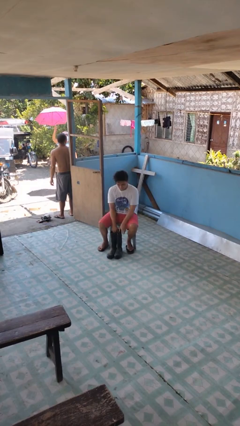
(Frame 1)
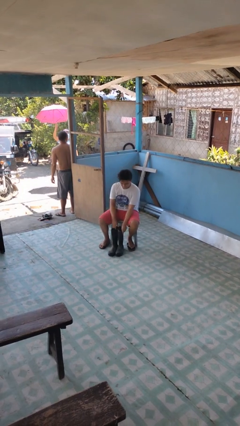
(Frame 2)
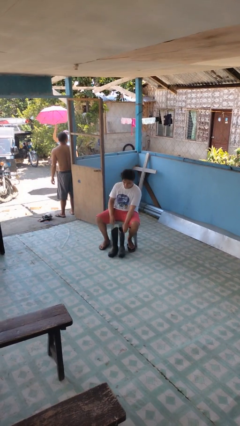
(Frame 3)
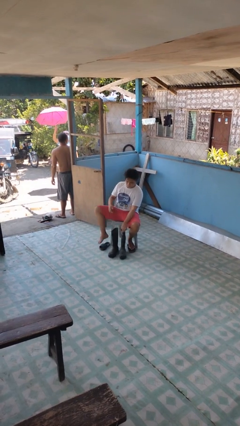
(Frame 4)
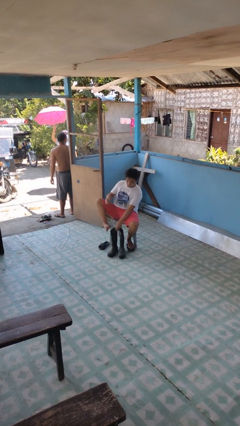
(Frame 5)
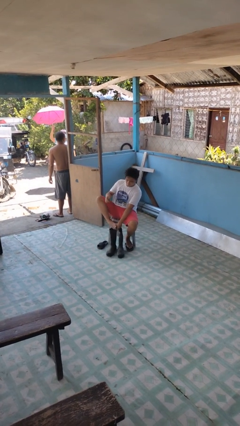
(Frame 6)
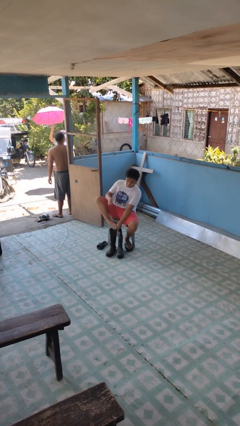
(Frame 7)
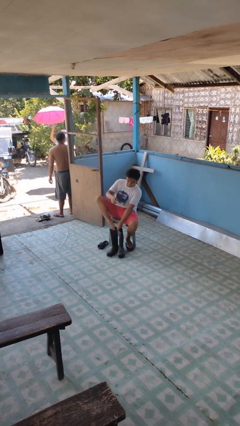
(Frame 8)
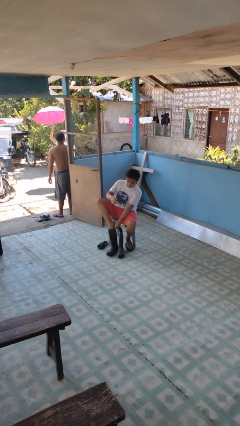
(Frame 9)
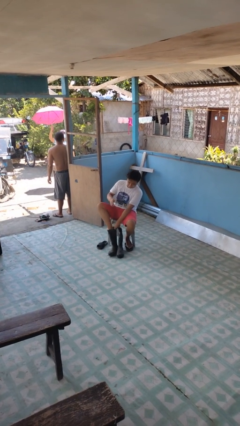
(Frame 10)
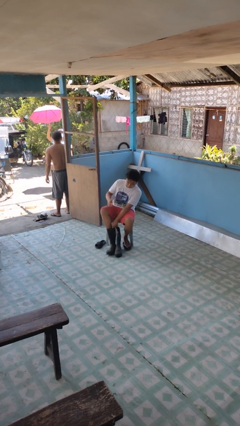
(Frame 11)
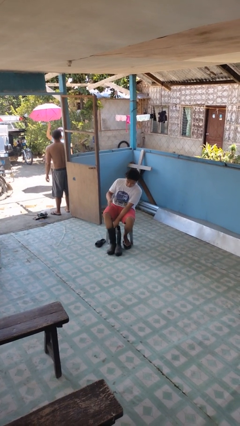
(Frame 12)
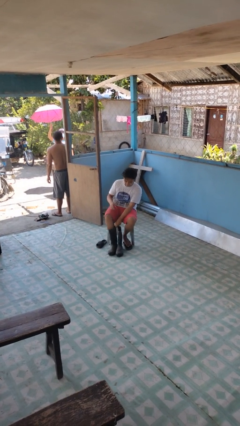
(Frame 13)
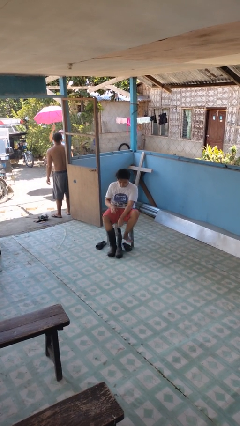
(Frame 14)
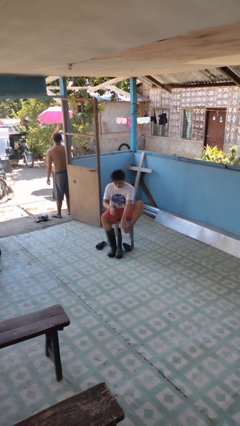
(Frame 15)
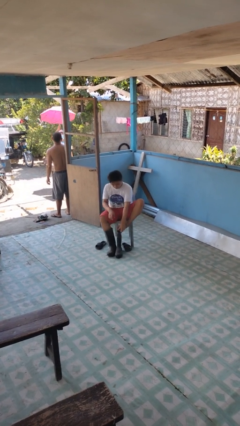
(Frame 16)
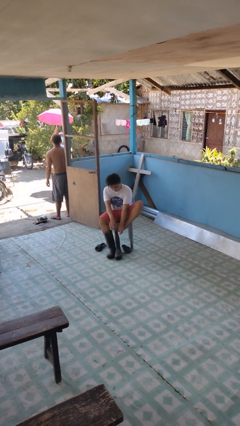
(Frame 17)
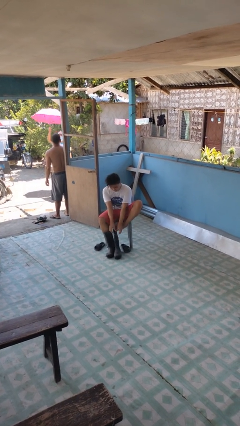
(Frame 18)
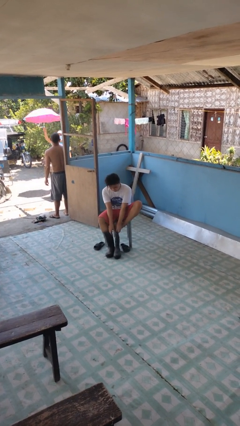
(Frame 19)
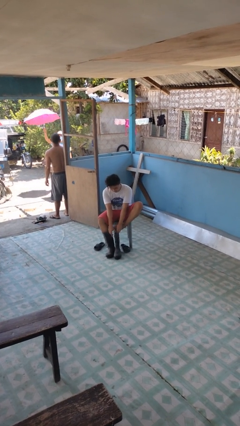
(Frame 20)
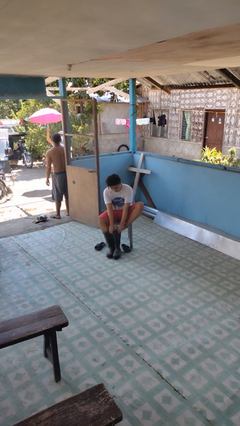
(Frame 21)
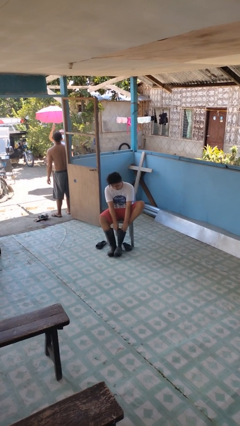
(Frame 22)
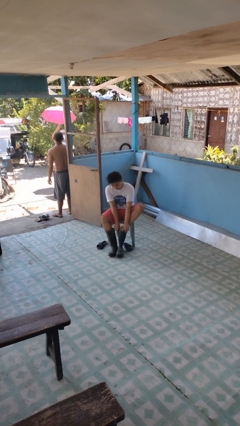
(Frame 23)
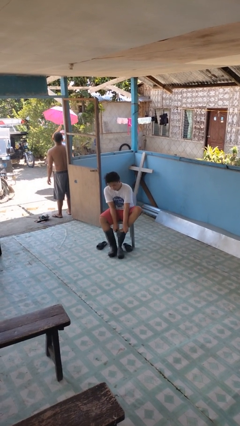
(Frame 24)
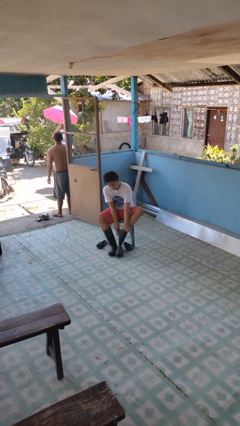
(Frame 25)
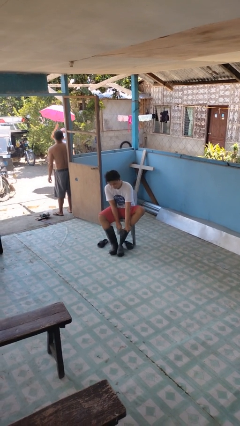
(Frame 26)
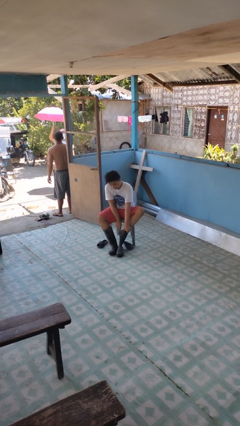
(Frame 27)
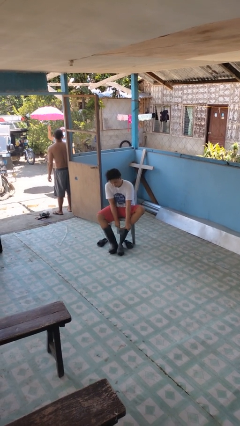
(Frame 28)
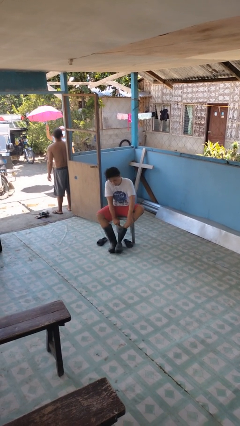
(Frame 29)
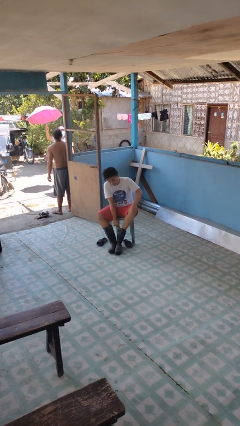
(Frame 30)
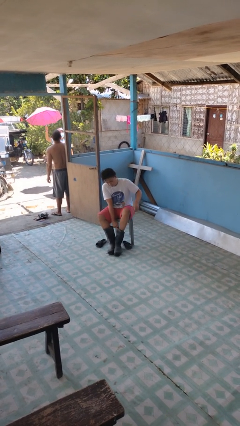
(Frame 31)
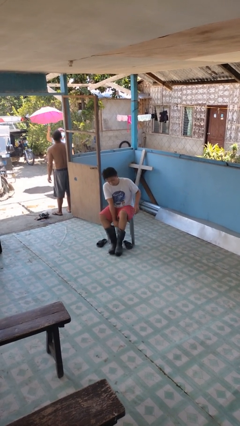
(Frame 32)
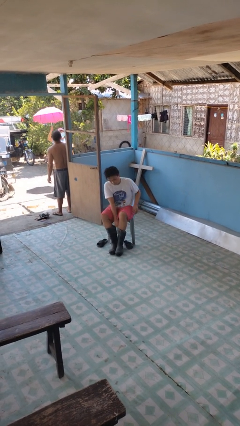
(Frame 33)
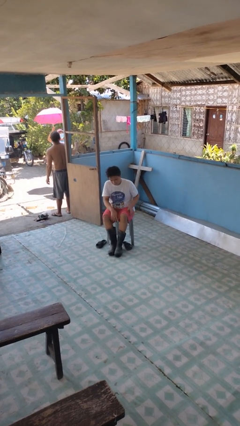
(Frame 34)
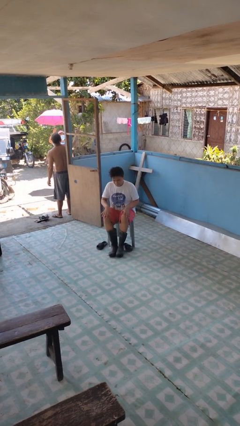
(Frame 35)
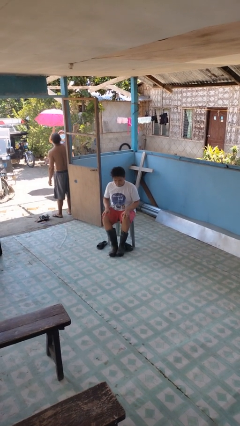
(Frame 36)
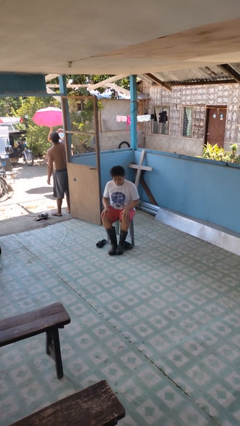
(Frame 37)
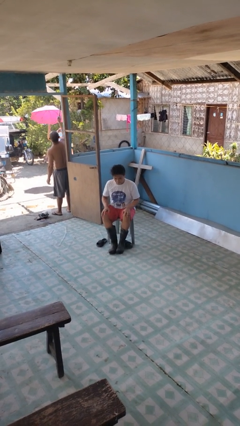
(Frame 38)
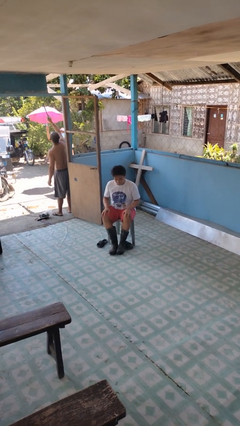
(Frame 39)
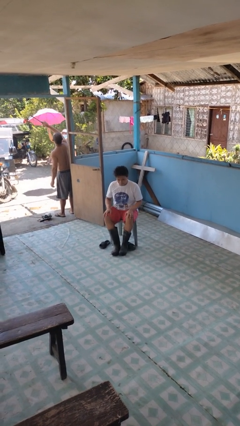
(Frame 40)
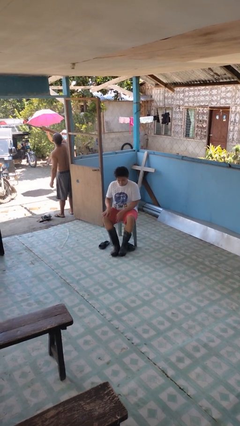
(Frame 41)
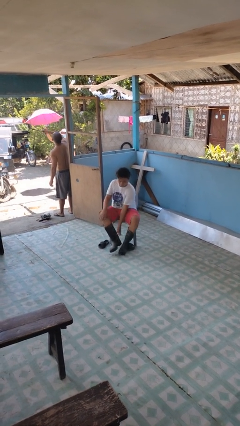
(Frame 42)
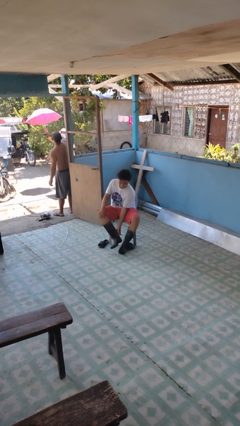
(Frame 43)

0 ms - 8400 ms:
person puts on boots

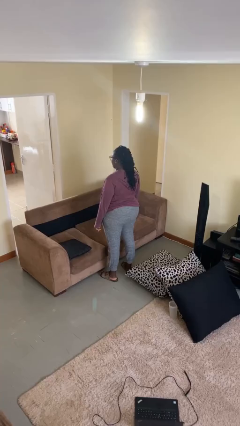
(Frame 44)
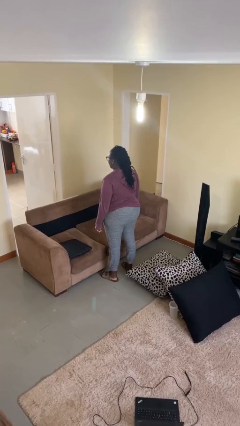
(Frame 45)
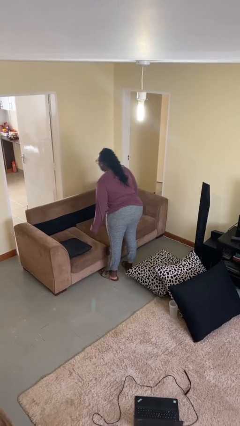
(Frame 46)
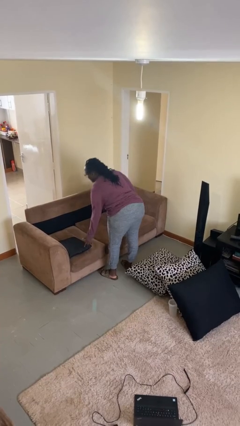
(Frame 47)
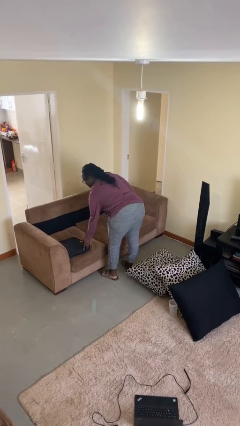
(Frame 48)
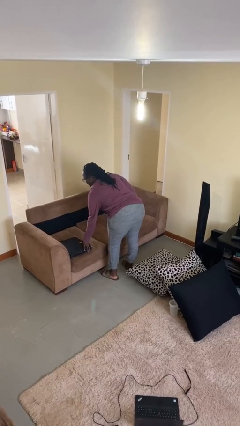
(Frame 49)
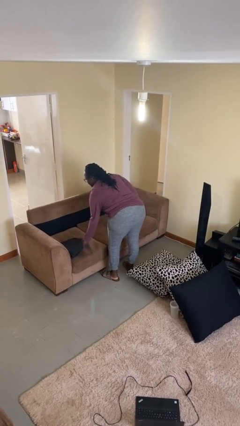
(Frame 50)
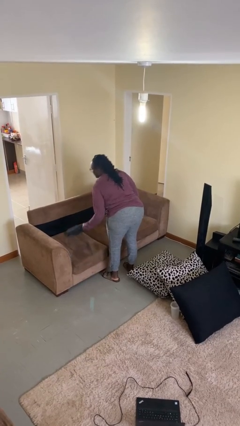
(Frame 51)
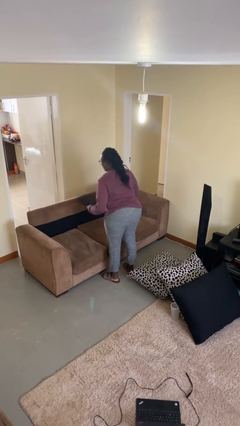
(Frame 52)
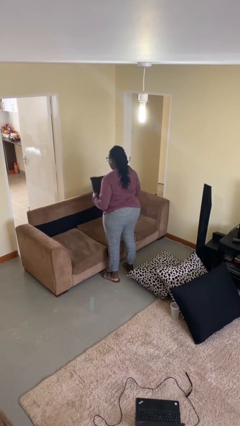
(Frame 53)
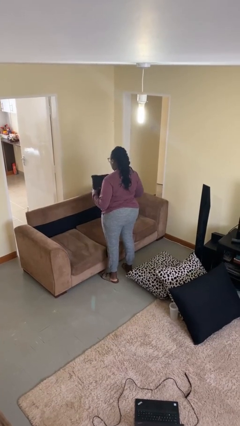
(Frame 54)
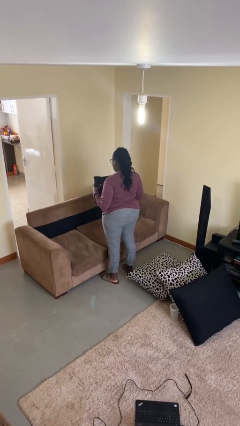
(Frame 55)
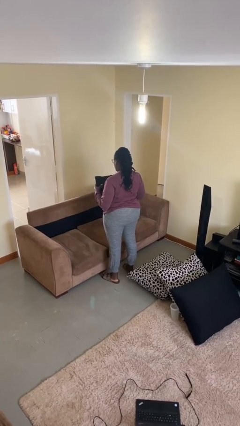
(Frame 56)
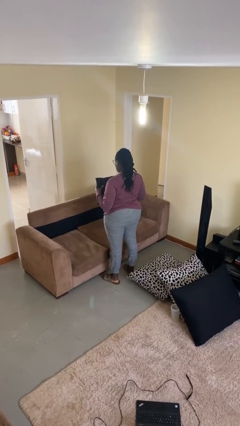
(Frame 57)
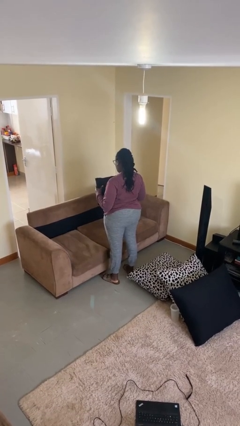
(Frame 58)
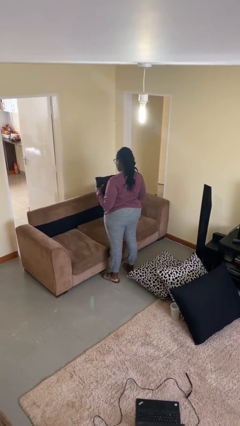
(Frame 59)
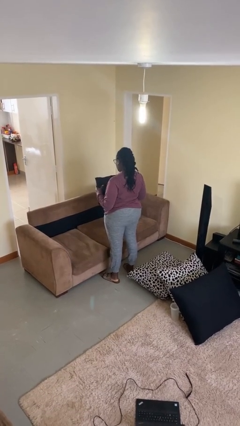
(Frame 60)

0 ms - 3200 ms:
person picks up object from couch

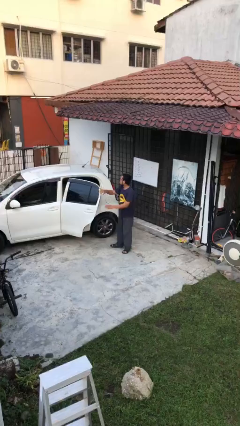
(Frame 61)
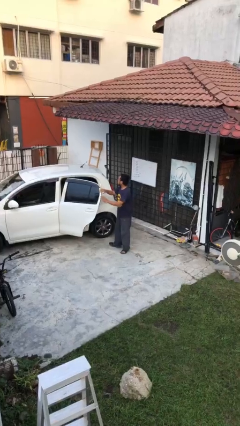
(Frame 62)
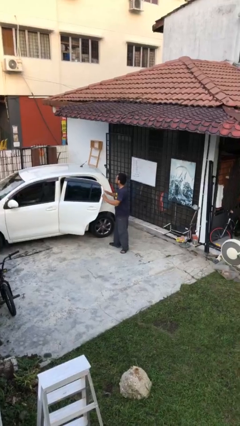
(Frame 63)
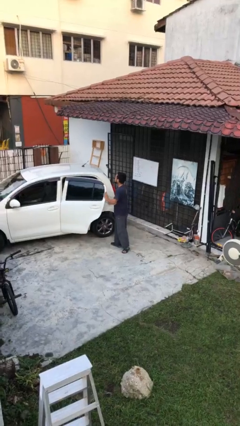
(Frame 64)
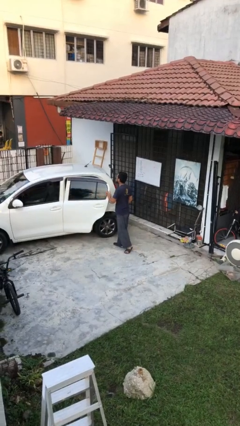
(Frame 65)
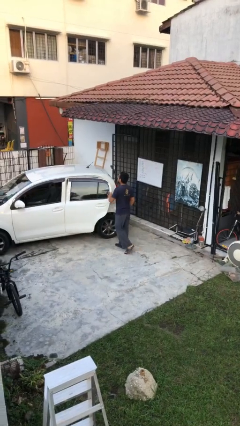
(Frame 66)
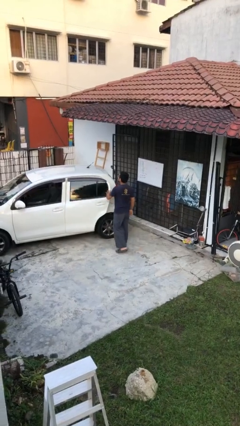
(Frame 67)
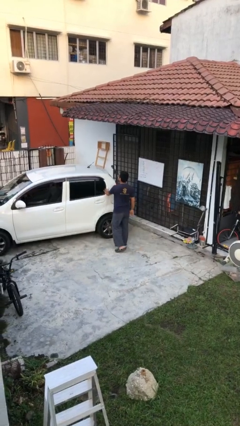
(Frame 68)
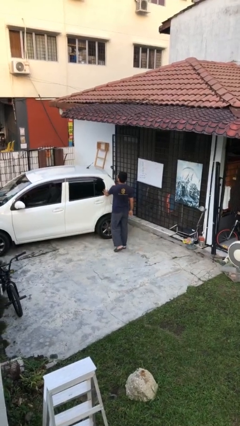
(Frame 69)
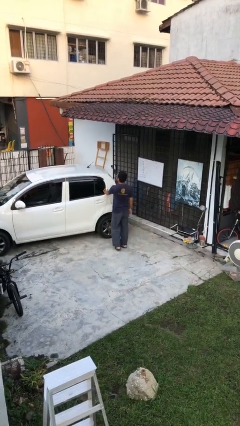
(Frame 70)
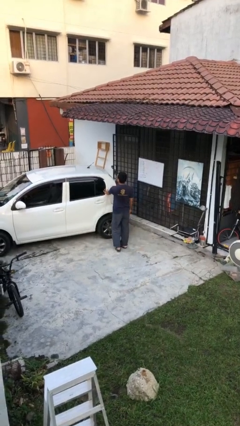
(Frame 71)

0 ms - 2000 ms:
person closes car door

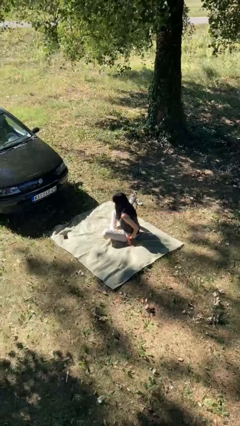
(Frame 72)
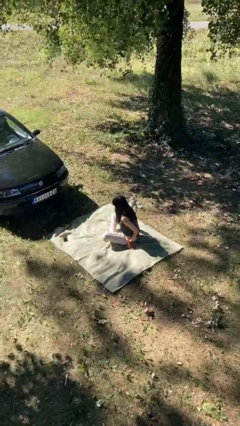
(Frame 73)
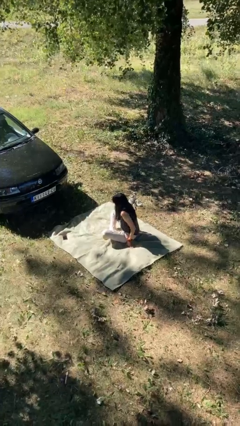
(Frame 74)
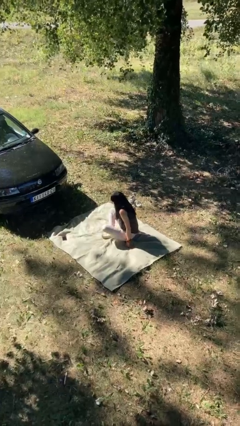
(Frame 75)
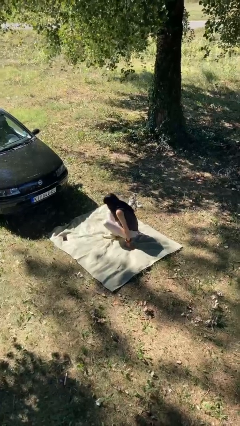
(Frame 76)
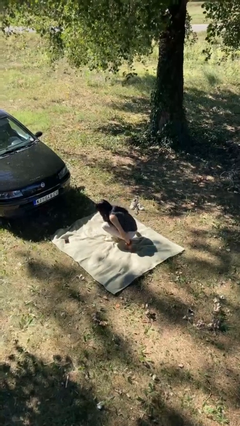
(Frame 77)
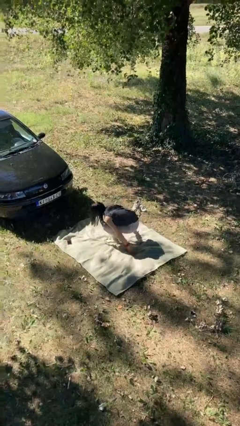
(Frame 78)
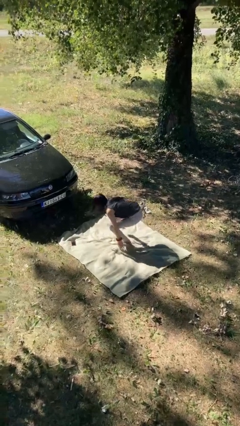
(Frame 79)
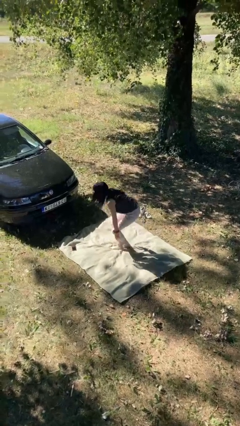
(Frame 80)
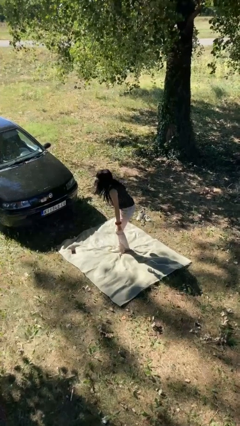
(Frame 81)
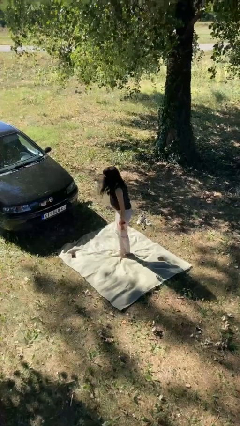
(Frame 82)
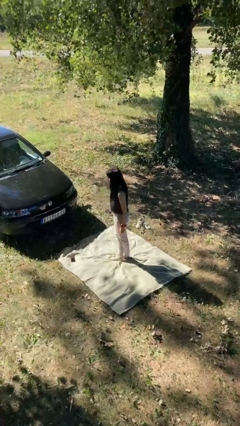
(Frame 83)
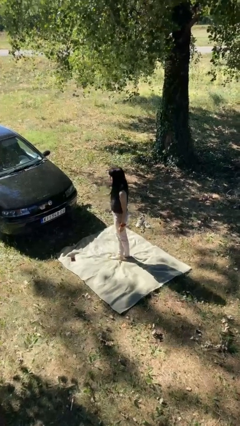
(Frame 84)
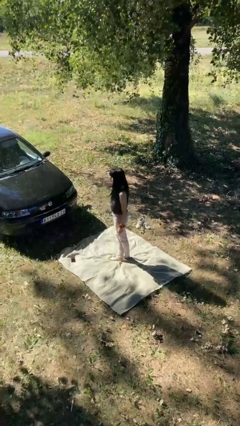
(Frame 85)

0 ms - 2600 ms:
person stands up from floor

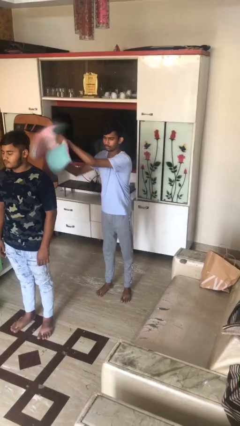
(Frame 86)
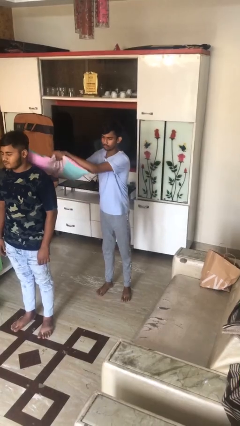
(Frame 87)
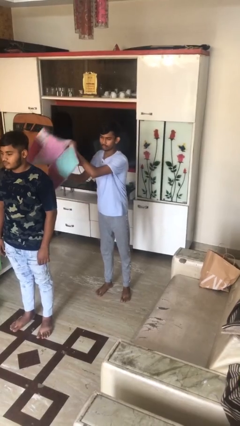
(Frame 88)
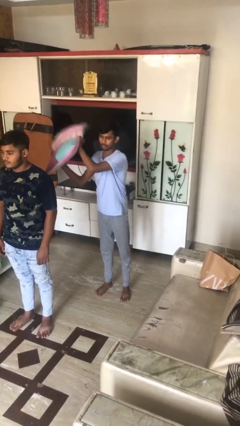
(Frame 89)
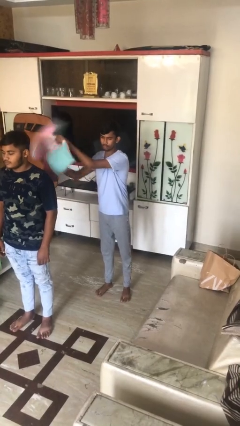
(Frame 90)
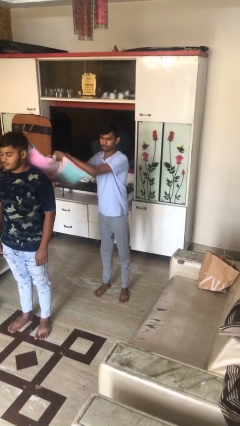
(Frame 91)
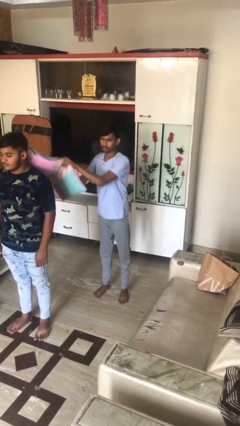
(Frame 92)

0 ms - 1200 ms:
person hits person with pillow

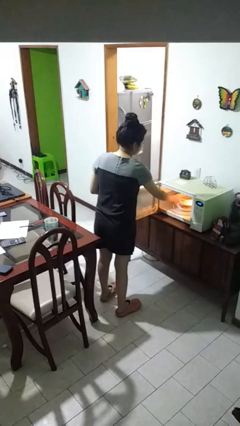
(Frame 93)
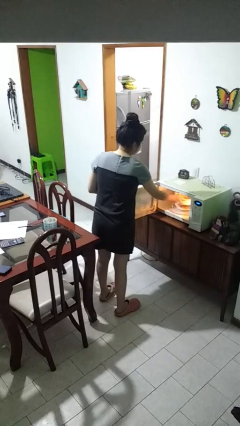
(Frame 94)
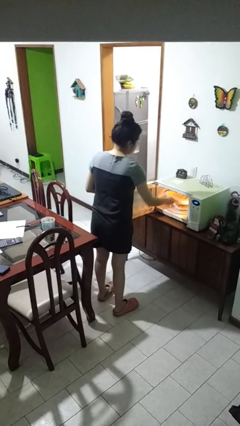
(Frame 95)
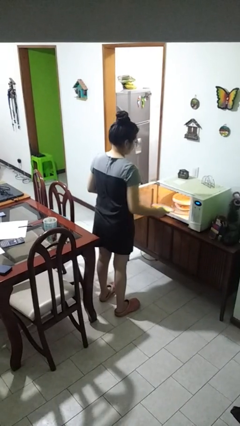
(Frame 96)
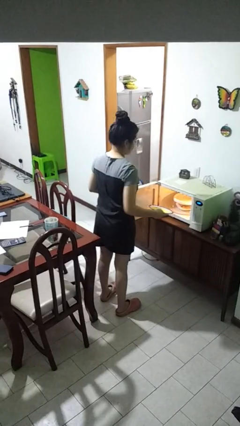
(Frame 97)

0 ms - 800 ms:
person takes object from microwave
